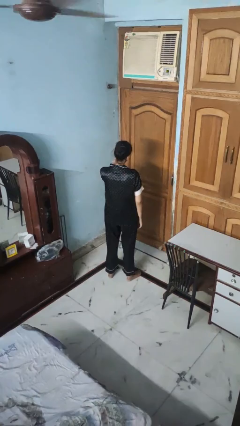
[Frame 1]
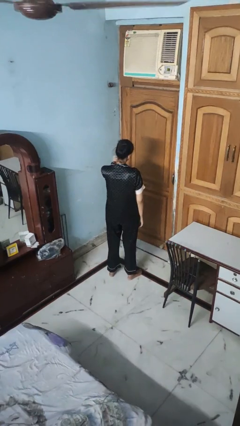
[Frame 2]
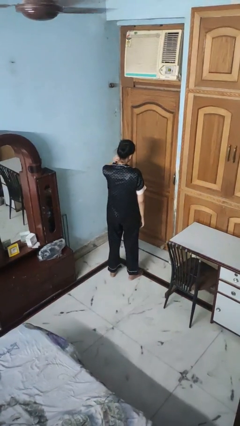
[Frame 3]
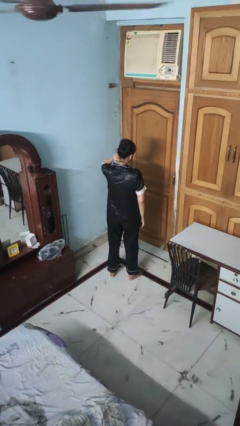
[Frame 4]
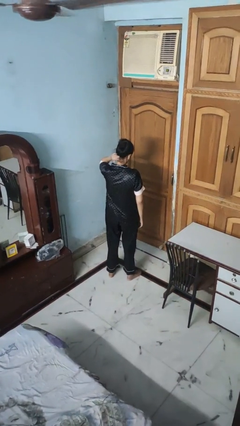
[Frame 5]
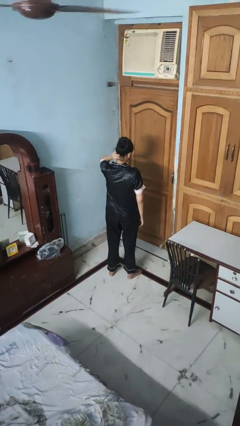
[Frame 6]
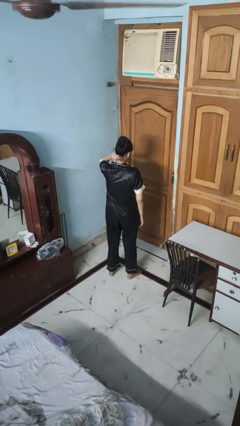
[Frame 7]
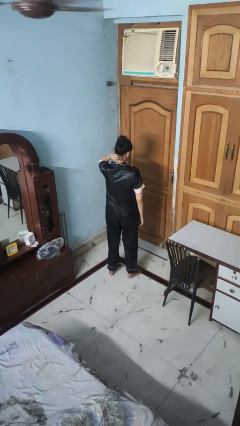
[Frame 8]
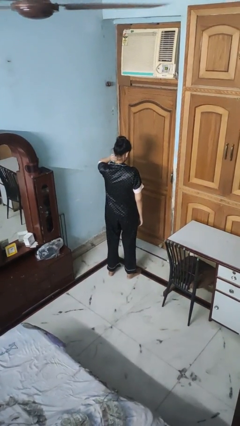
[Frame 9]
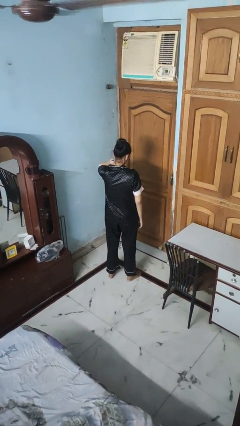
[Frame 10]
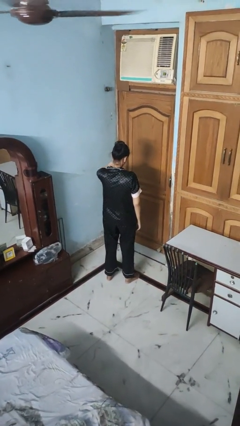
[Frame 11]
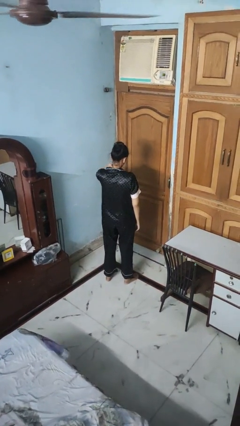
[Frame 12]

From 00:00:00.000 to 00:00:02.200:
person rubs neck

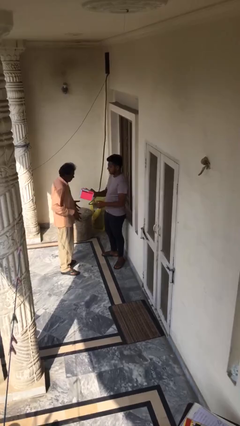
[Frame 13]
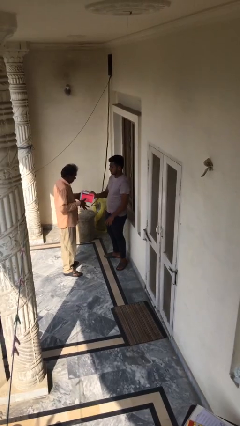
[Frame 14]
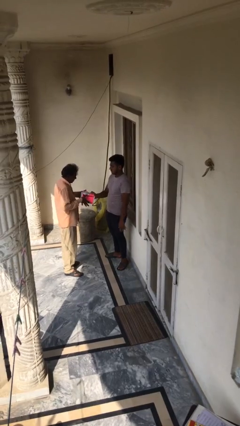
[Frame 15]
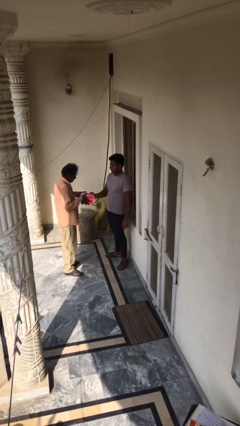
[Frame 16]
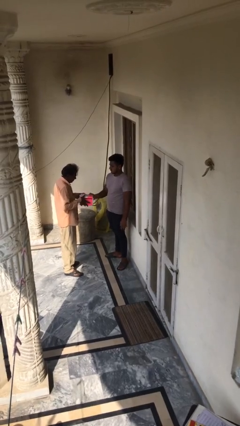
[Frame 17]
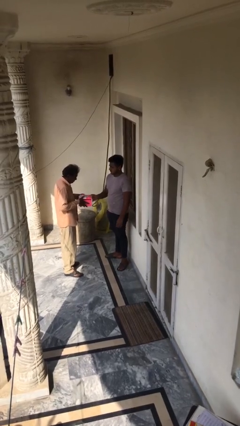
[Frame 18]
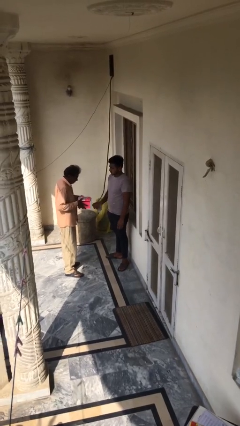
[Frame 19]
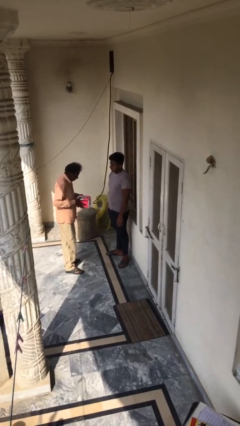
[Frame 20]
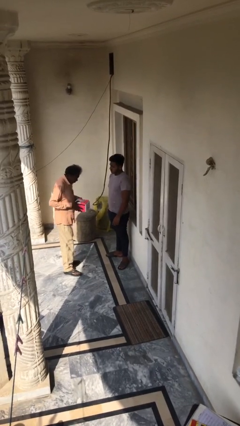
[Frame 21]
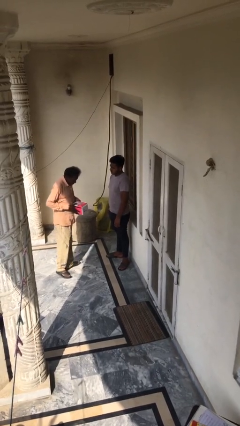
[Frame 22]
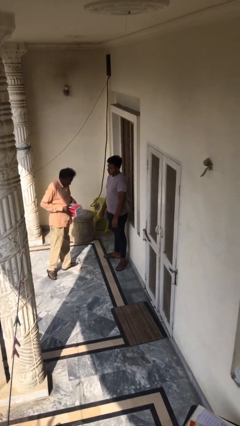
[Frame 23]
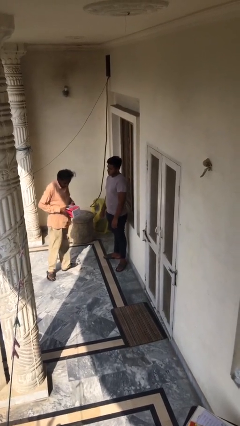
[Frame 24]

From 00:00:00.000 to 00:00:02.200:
person transfers object to person

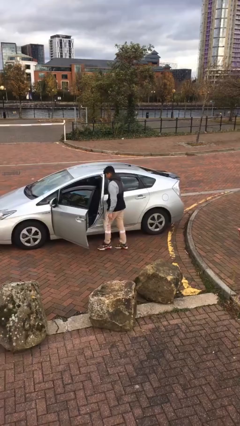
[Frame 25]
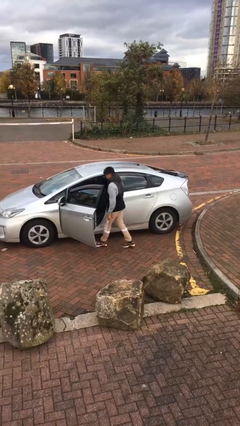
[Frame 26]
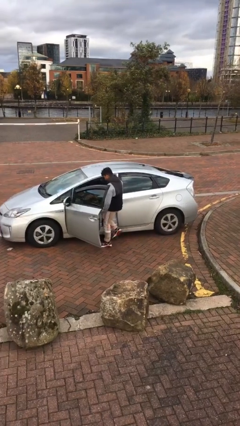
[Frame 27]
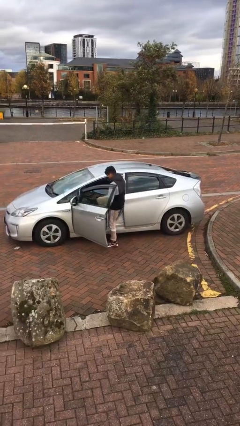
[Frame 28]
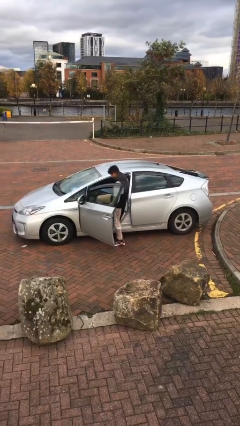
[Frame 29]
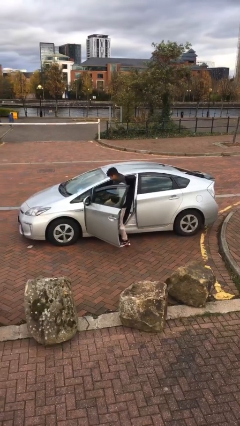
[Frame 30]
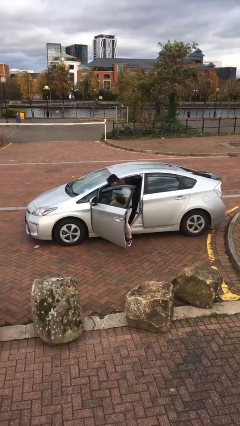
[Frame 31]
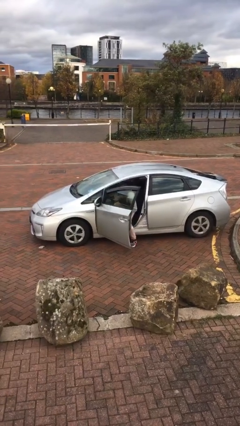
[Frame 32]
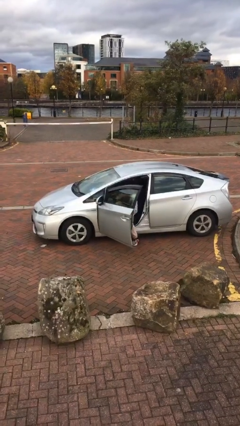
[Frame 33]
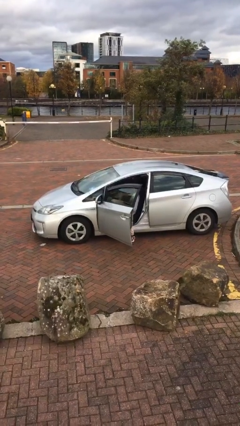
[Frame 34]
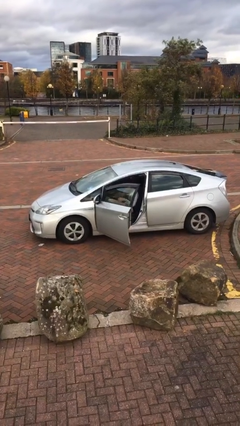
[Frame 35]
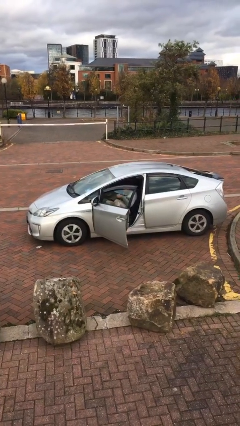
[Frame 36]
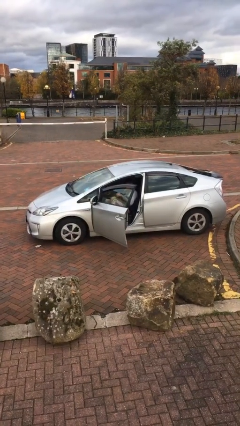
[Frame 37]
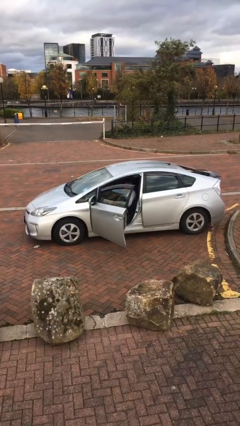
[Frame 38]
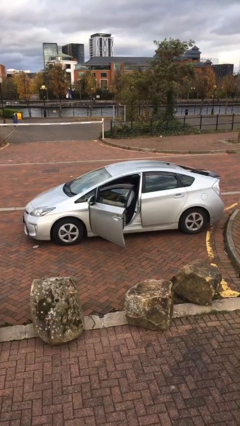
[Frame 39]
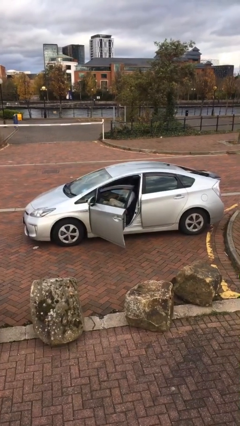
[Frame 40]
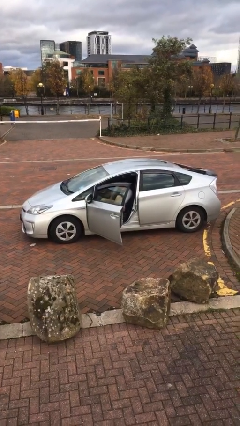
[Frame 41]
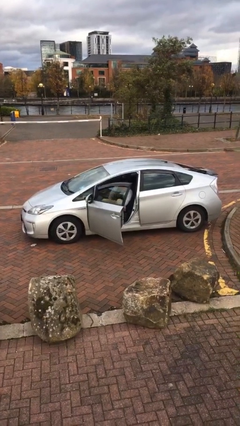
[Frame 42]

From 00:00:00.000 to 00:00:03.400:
person enters car

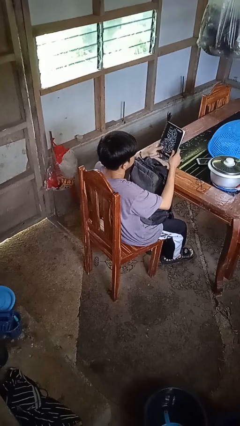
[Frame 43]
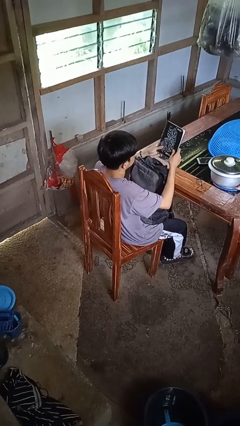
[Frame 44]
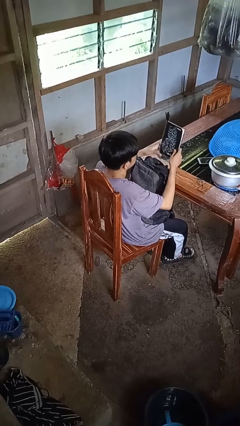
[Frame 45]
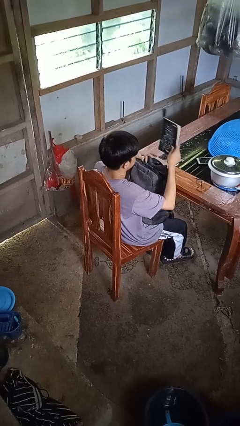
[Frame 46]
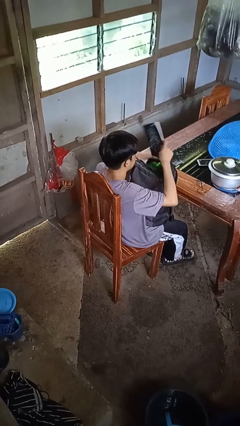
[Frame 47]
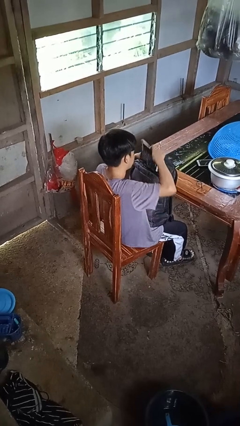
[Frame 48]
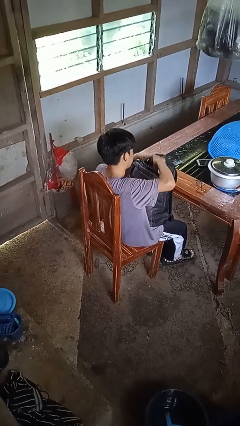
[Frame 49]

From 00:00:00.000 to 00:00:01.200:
person puts object into backpack

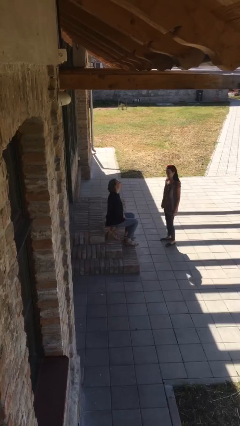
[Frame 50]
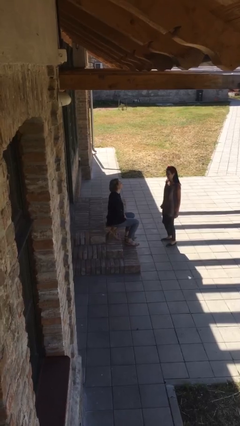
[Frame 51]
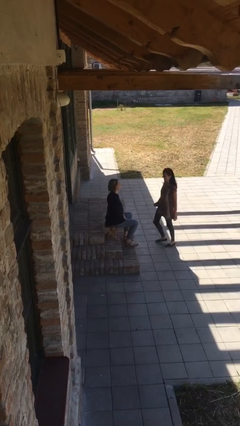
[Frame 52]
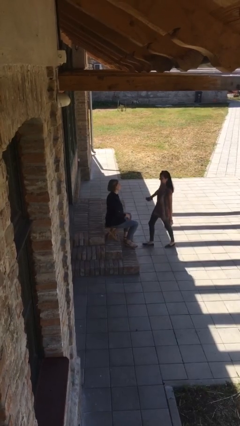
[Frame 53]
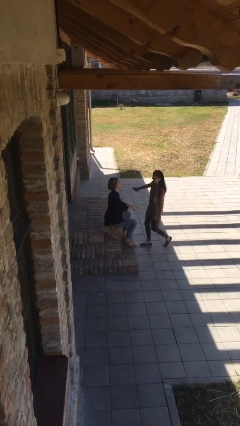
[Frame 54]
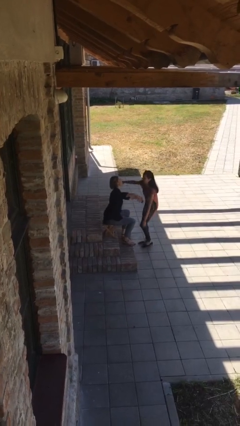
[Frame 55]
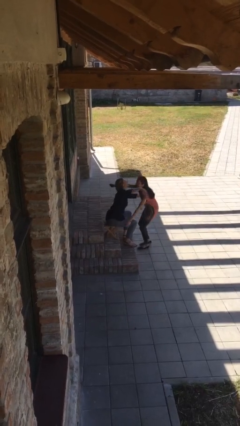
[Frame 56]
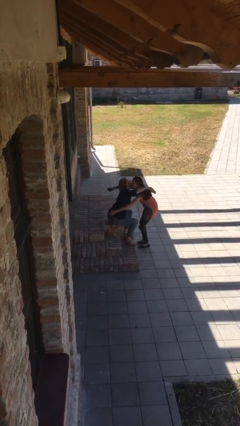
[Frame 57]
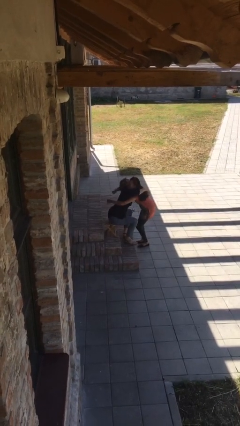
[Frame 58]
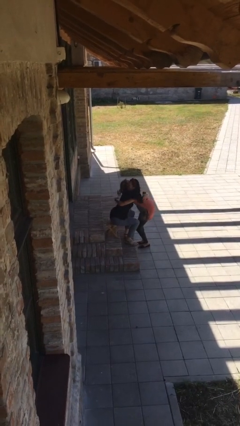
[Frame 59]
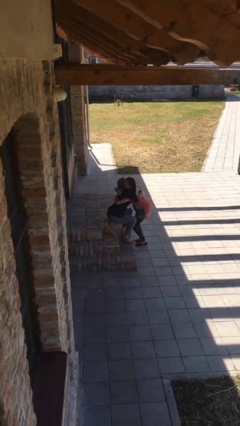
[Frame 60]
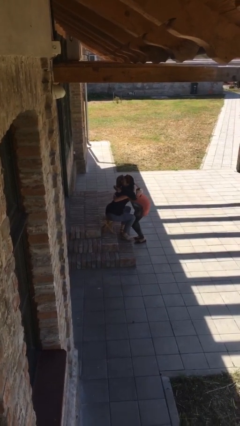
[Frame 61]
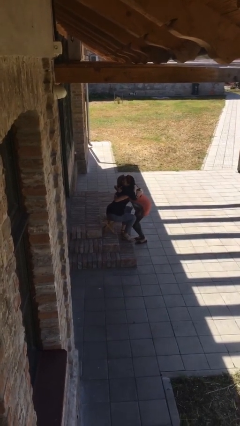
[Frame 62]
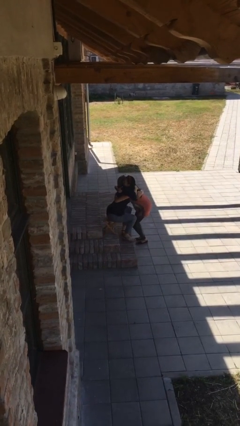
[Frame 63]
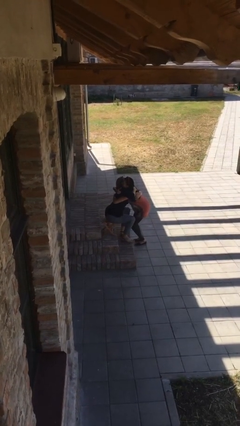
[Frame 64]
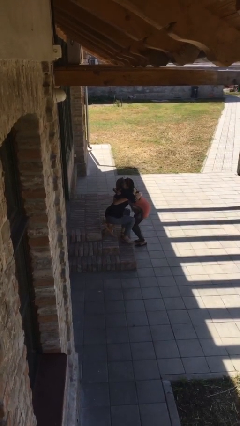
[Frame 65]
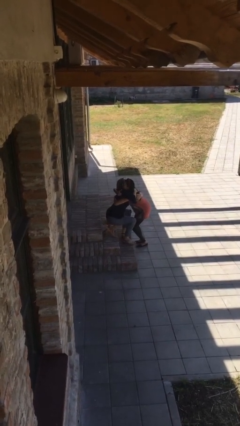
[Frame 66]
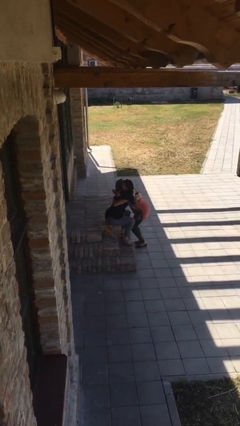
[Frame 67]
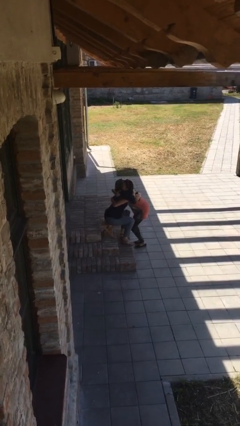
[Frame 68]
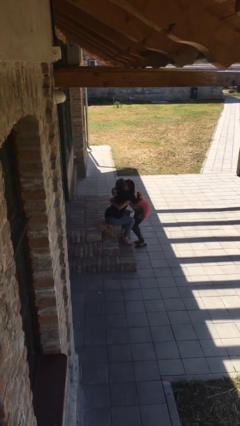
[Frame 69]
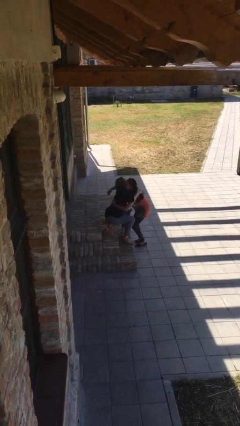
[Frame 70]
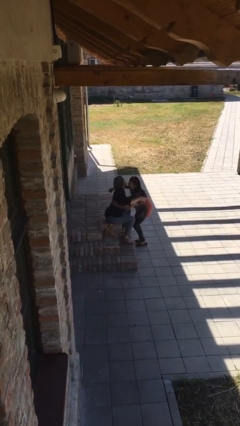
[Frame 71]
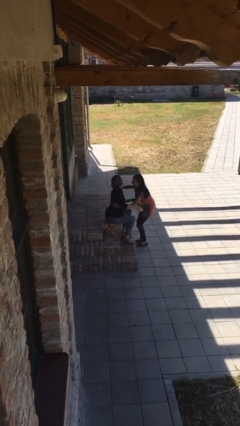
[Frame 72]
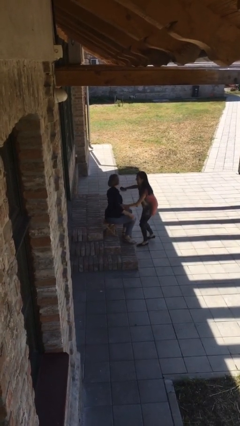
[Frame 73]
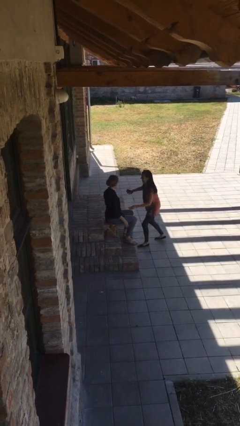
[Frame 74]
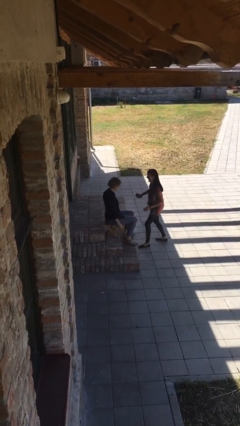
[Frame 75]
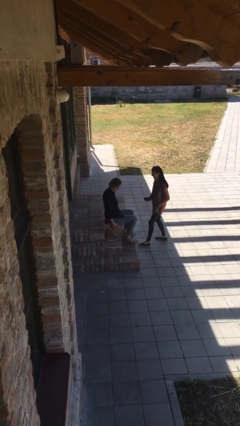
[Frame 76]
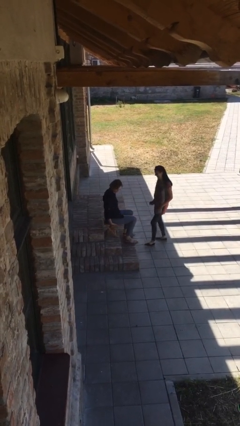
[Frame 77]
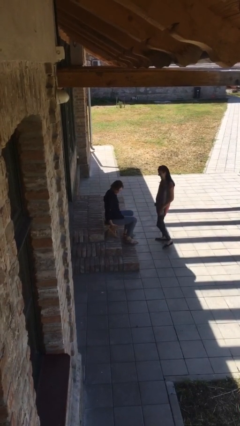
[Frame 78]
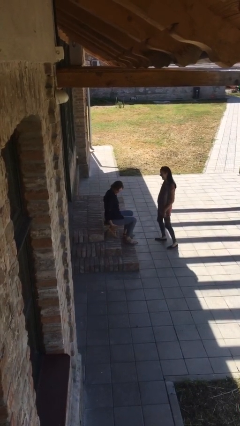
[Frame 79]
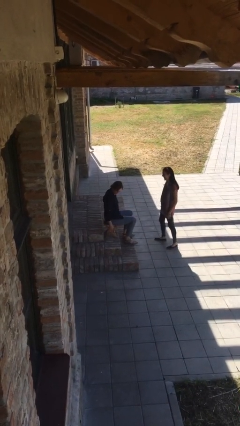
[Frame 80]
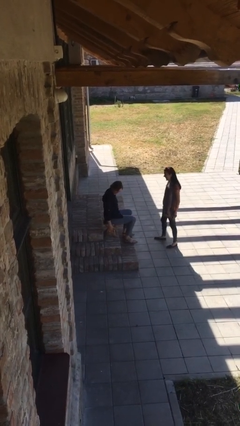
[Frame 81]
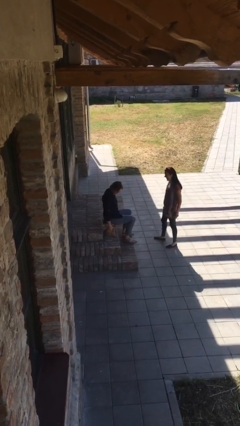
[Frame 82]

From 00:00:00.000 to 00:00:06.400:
person embraces person

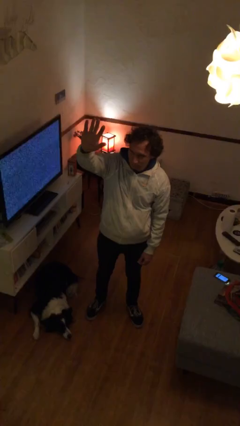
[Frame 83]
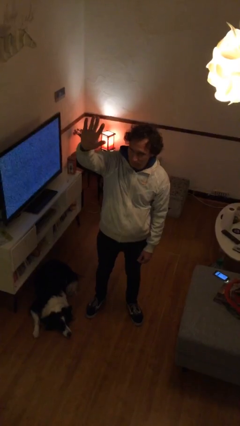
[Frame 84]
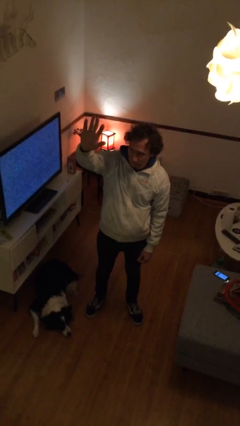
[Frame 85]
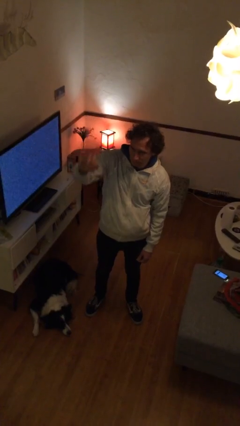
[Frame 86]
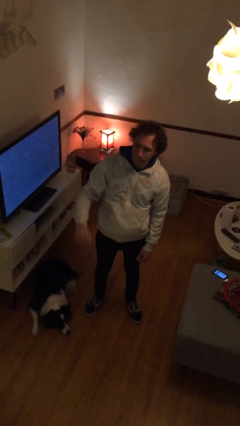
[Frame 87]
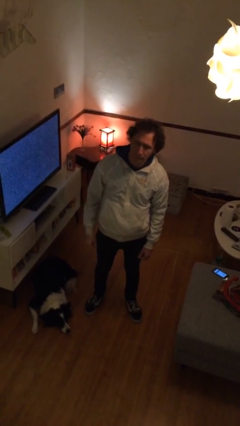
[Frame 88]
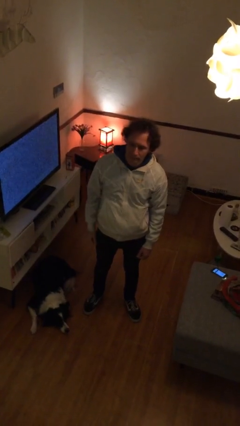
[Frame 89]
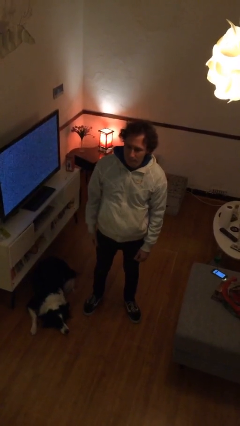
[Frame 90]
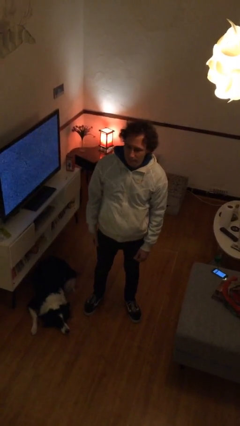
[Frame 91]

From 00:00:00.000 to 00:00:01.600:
person gestures lower hand
